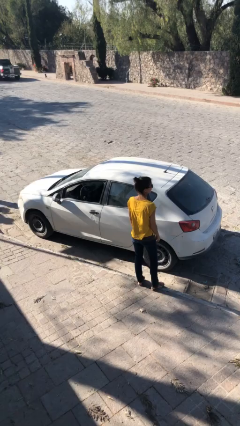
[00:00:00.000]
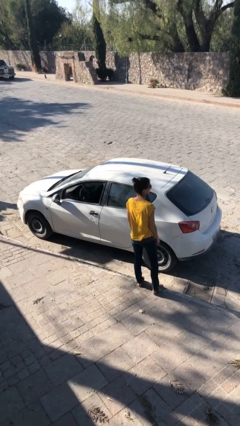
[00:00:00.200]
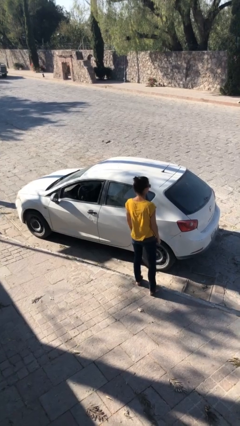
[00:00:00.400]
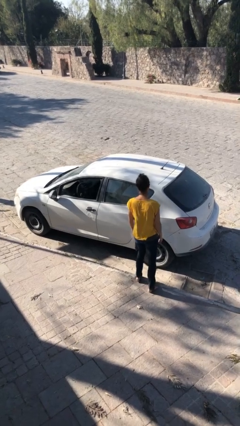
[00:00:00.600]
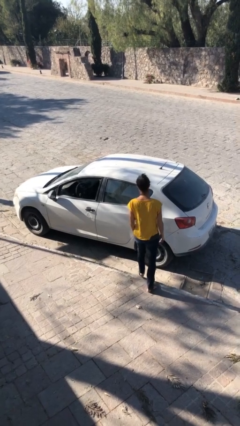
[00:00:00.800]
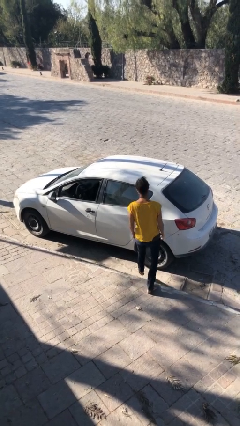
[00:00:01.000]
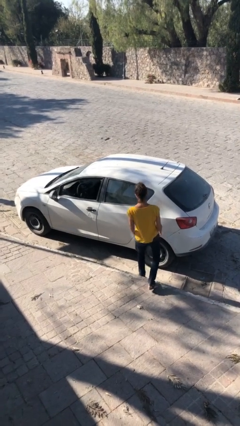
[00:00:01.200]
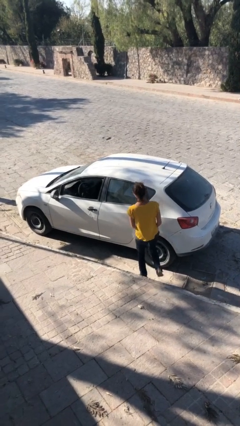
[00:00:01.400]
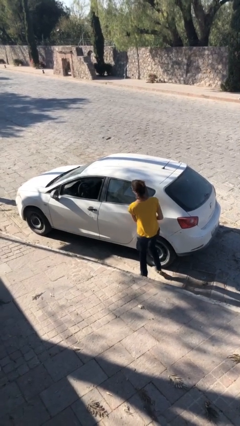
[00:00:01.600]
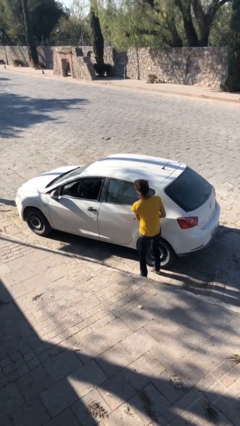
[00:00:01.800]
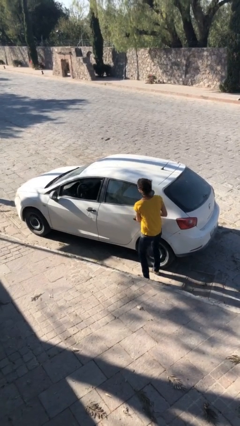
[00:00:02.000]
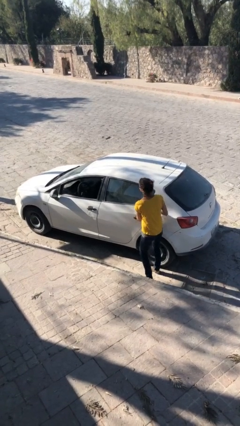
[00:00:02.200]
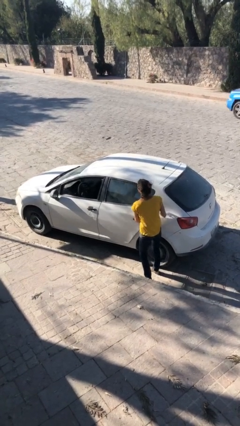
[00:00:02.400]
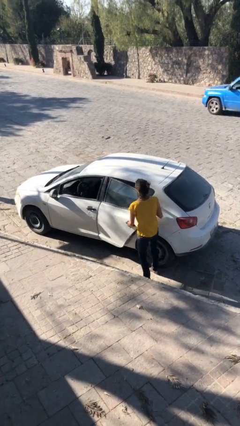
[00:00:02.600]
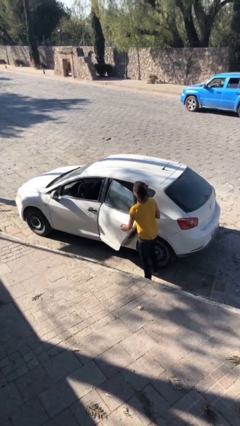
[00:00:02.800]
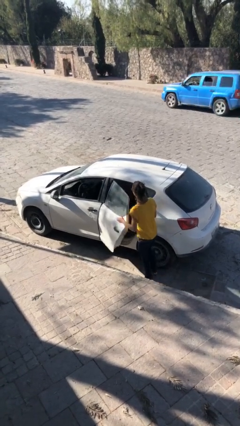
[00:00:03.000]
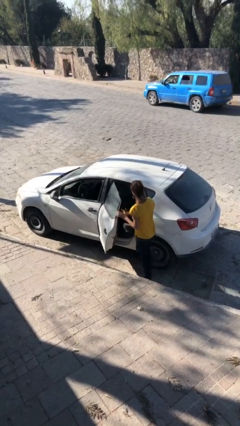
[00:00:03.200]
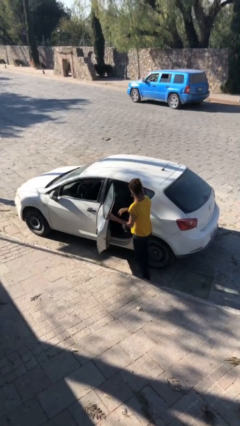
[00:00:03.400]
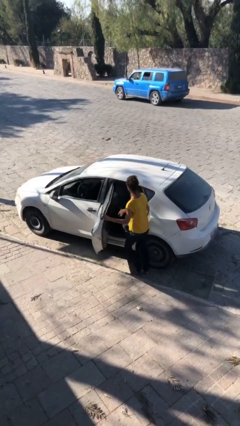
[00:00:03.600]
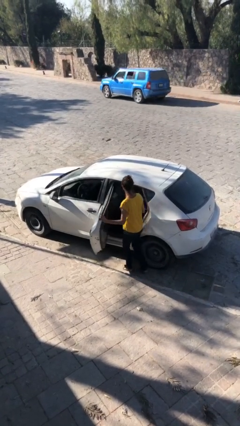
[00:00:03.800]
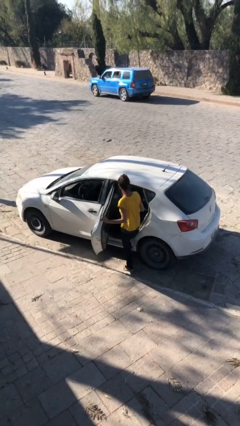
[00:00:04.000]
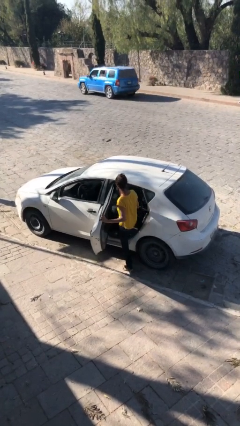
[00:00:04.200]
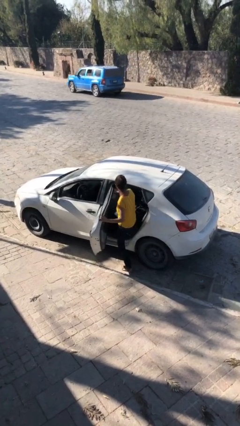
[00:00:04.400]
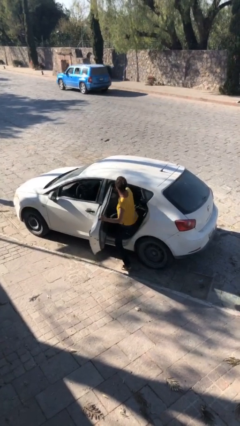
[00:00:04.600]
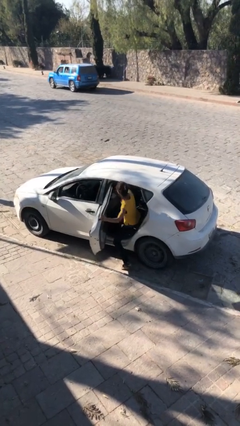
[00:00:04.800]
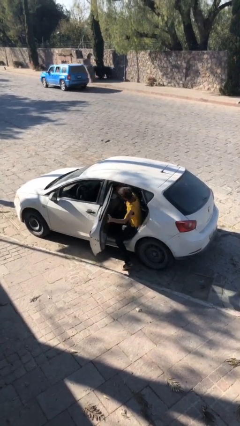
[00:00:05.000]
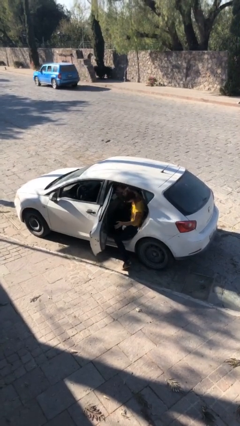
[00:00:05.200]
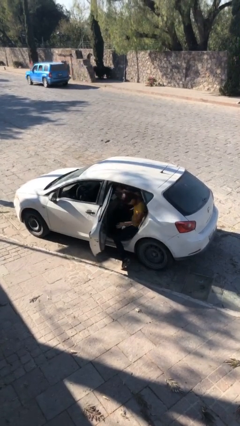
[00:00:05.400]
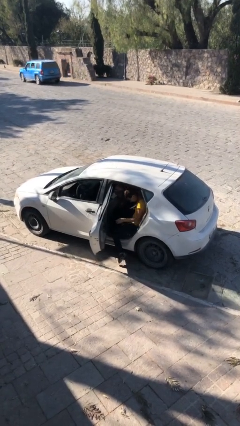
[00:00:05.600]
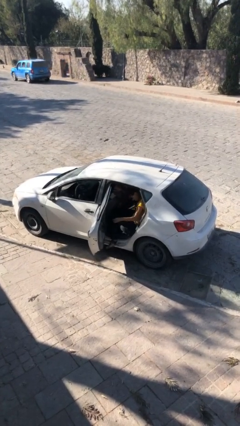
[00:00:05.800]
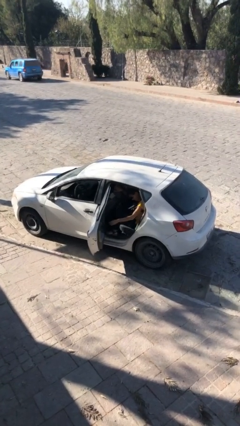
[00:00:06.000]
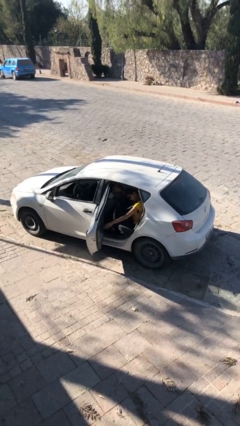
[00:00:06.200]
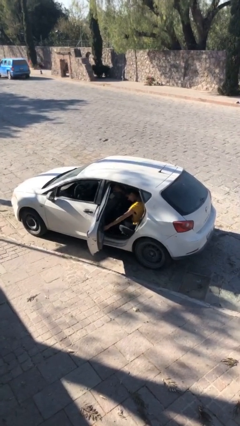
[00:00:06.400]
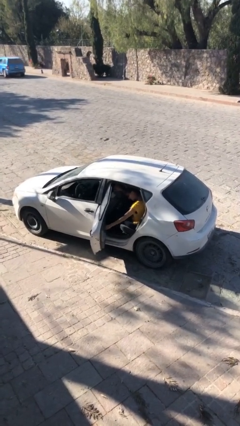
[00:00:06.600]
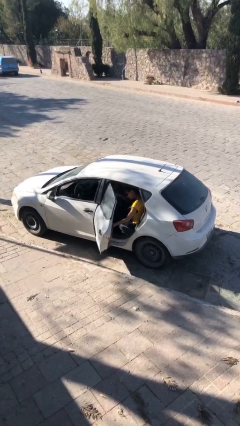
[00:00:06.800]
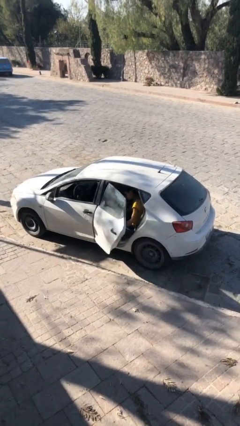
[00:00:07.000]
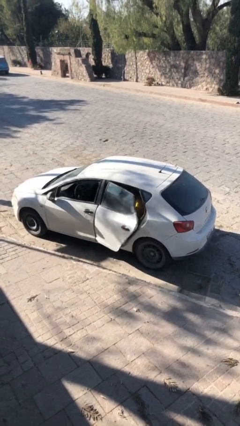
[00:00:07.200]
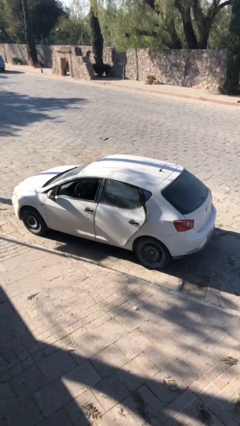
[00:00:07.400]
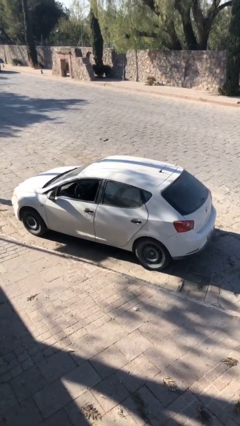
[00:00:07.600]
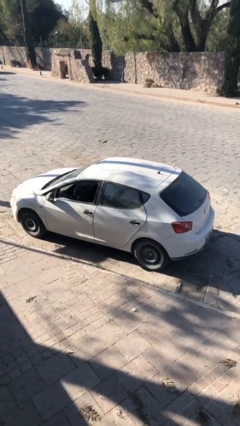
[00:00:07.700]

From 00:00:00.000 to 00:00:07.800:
car picks up person

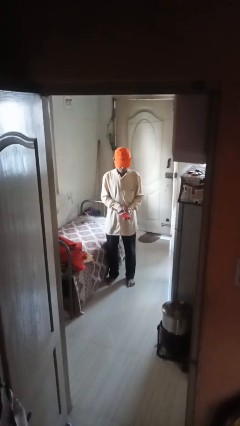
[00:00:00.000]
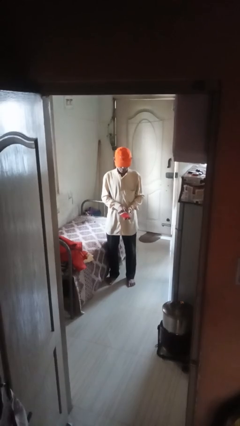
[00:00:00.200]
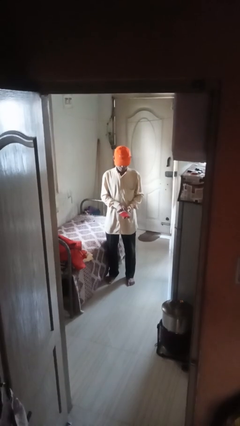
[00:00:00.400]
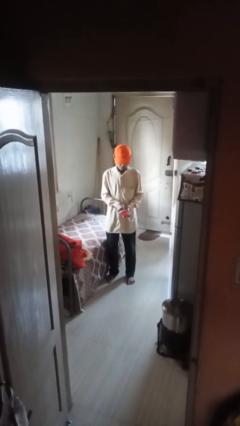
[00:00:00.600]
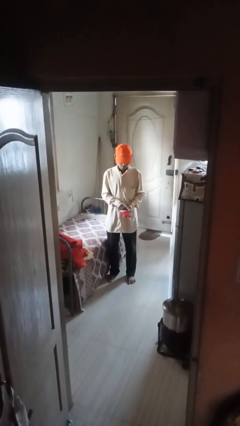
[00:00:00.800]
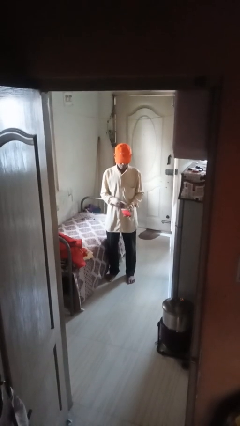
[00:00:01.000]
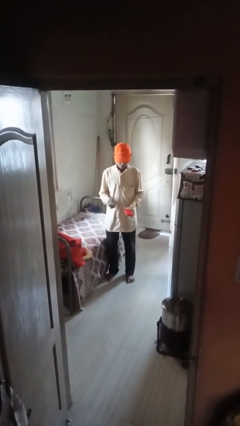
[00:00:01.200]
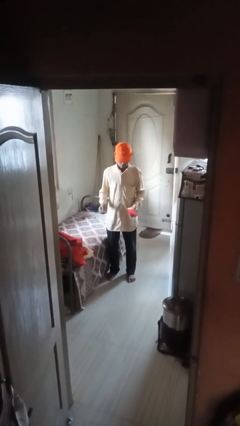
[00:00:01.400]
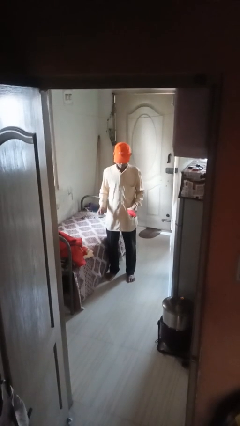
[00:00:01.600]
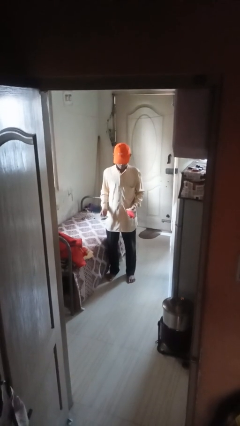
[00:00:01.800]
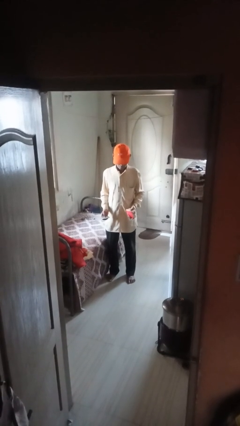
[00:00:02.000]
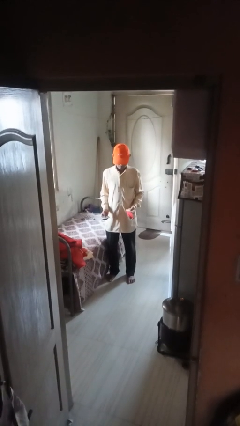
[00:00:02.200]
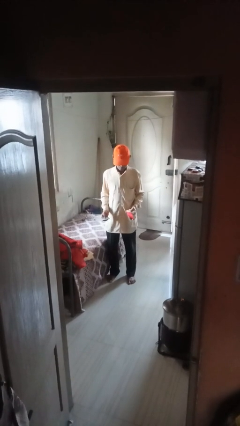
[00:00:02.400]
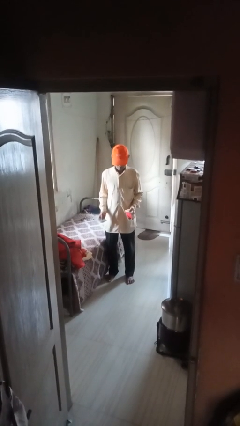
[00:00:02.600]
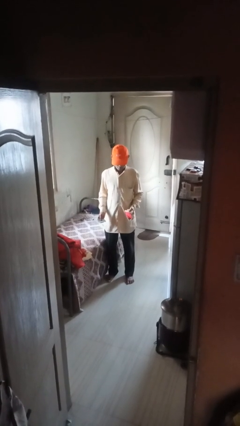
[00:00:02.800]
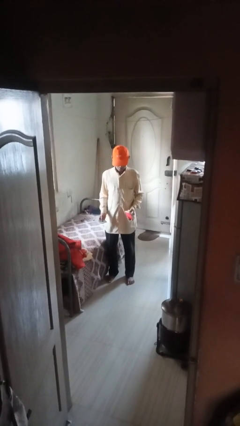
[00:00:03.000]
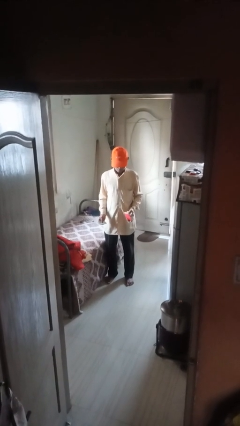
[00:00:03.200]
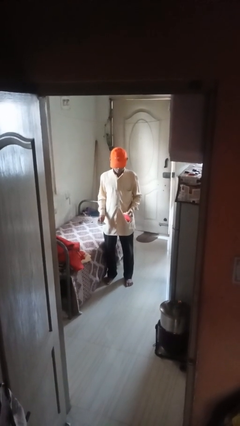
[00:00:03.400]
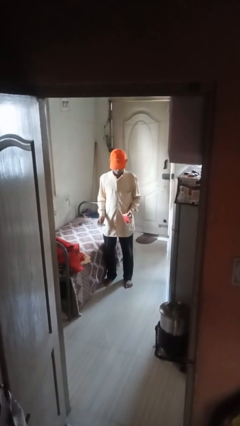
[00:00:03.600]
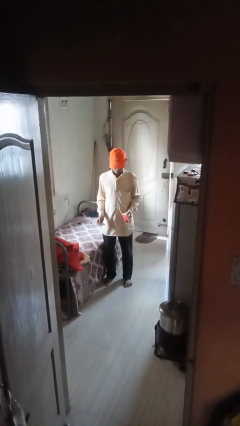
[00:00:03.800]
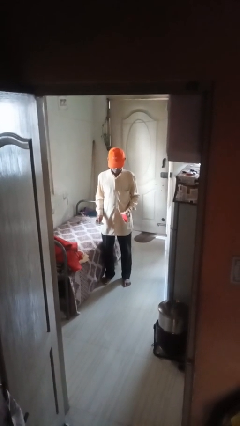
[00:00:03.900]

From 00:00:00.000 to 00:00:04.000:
person takes object from purse

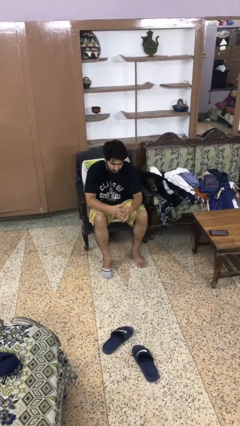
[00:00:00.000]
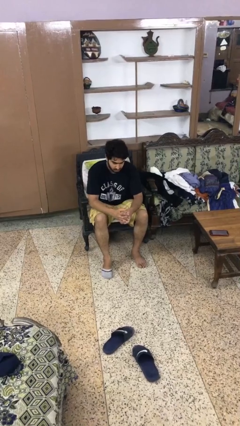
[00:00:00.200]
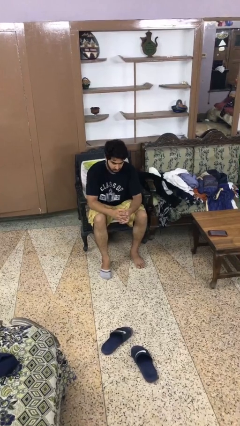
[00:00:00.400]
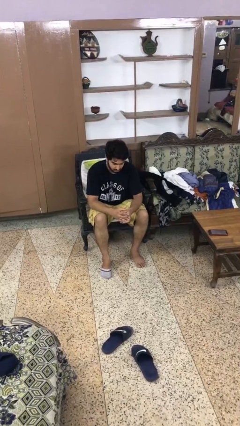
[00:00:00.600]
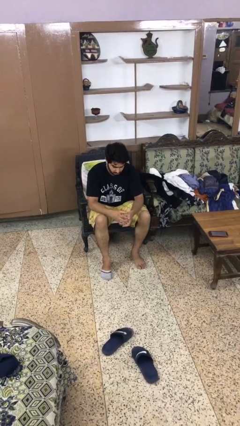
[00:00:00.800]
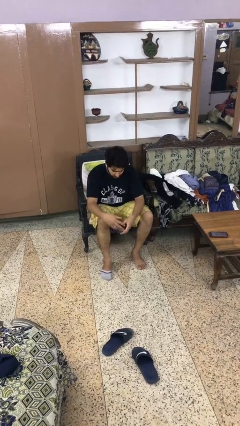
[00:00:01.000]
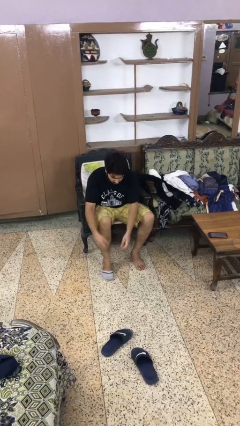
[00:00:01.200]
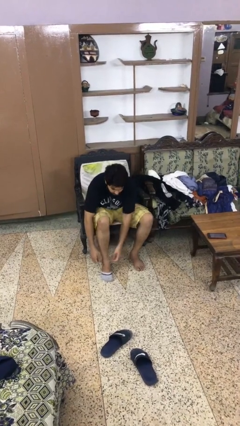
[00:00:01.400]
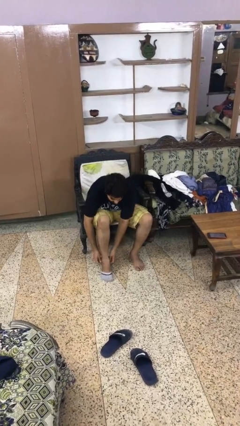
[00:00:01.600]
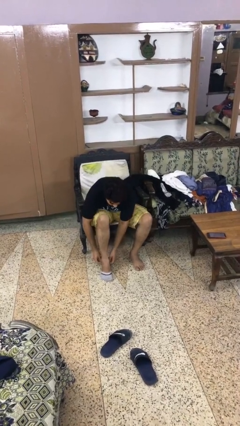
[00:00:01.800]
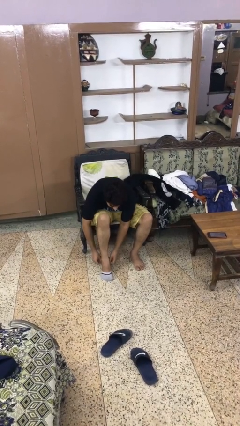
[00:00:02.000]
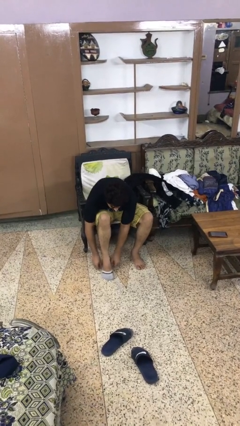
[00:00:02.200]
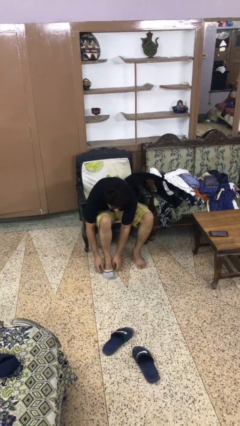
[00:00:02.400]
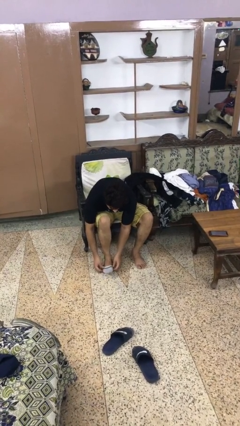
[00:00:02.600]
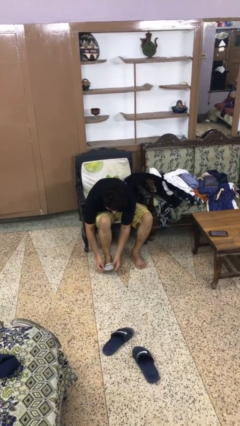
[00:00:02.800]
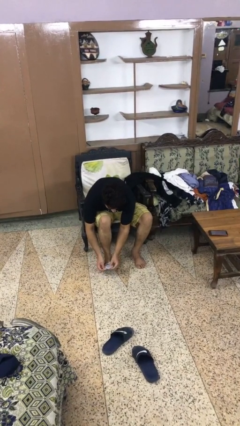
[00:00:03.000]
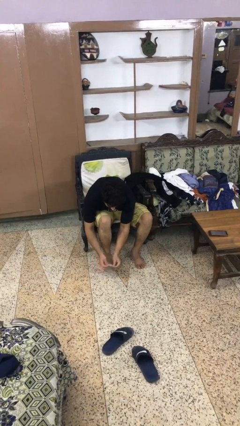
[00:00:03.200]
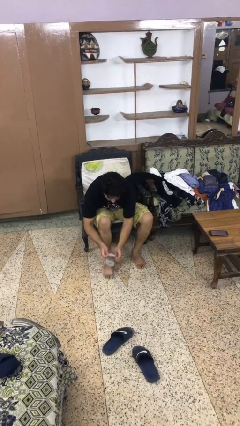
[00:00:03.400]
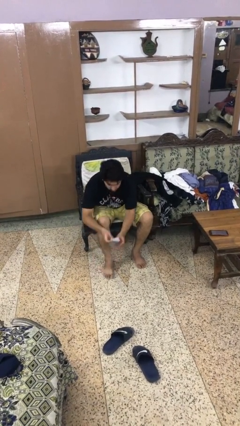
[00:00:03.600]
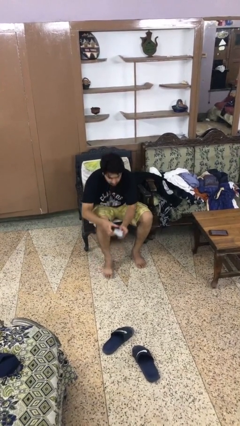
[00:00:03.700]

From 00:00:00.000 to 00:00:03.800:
person takes off socks

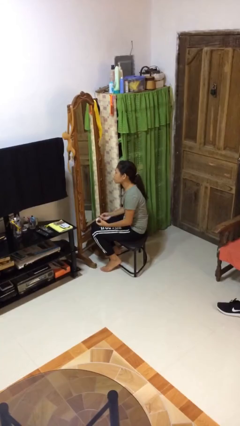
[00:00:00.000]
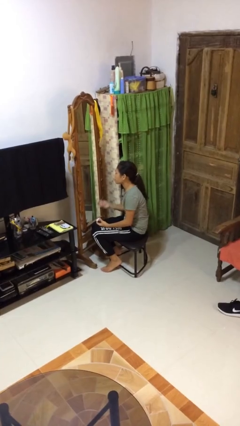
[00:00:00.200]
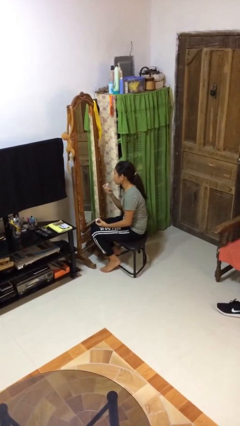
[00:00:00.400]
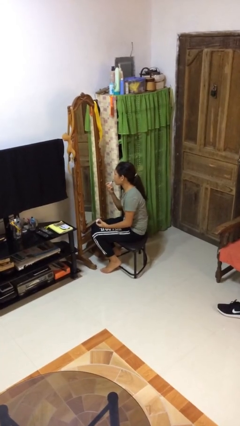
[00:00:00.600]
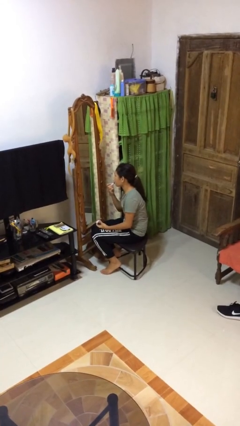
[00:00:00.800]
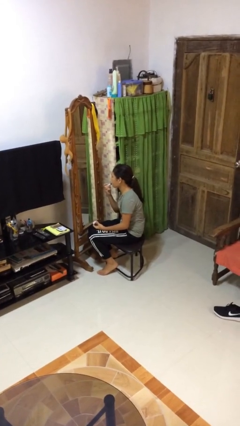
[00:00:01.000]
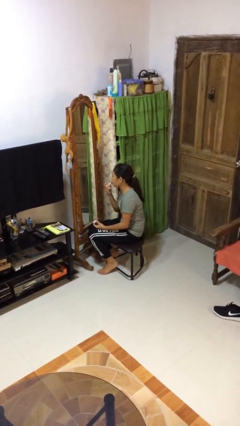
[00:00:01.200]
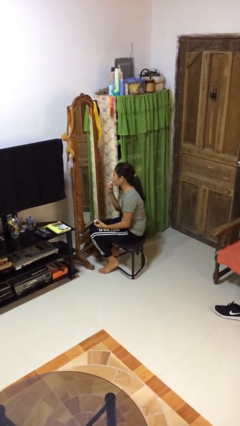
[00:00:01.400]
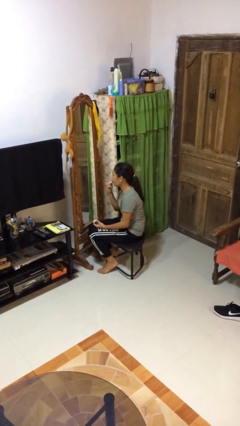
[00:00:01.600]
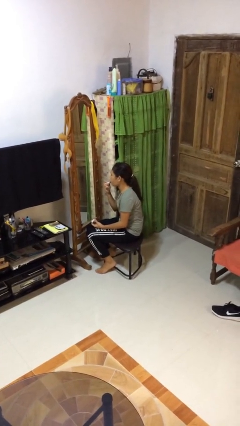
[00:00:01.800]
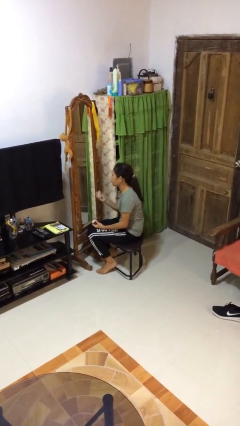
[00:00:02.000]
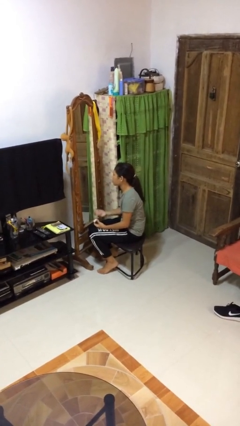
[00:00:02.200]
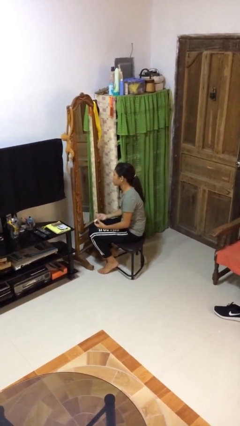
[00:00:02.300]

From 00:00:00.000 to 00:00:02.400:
person applies lip makeup
